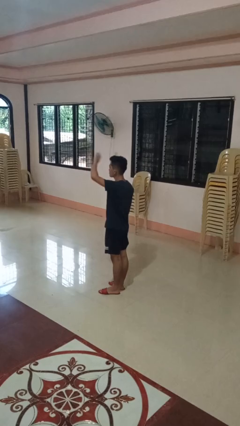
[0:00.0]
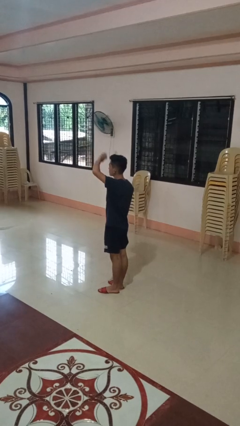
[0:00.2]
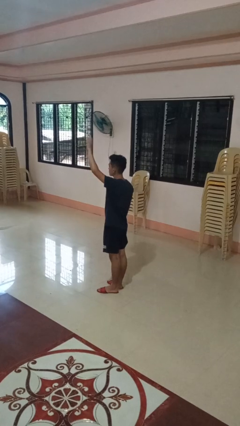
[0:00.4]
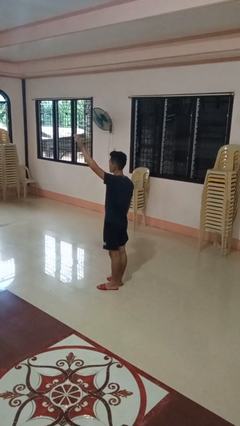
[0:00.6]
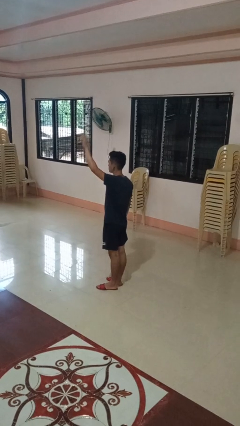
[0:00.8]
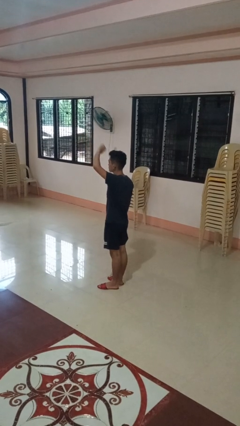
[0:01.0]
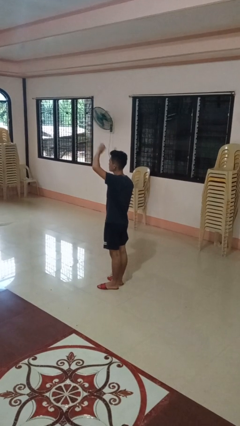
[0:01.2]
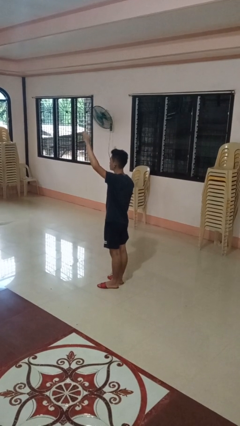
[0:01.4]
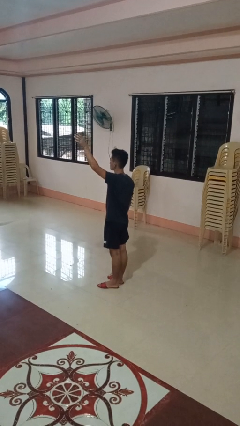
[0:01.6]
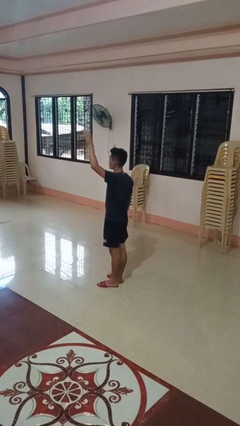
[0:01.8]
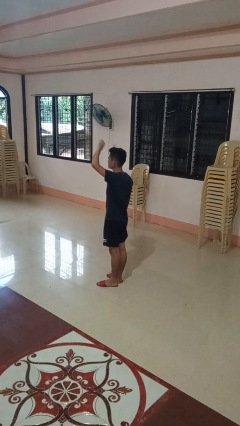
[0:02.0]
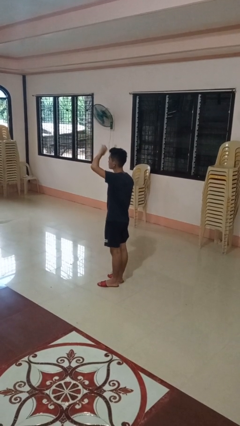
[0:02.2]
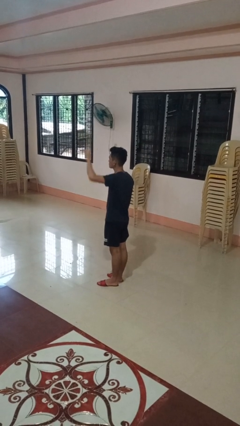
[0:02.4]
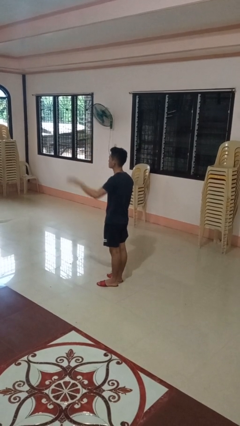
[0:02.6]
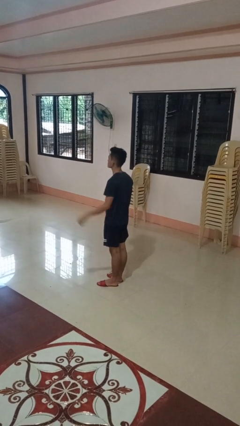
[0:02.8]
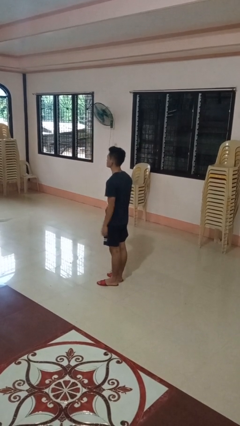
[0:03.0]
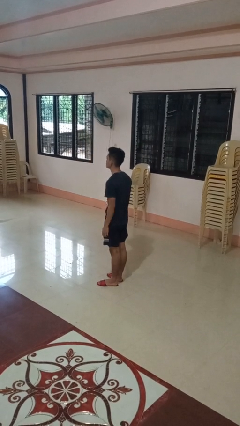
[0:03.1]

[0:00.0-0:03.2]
person waves at person

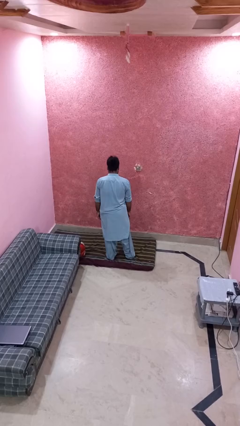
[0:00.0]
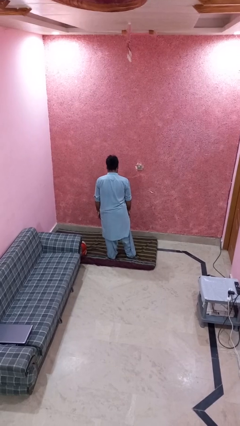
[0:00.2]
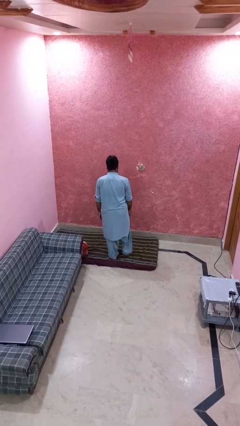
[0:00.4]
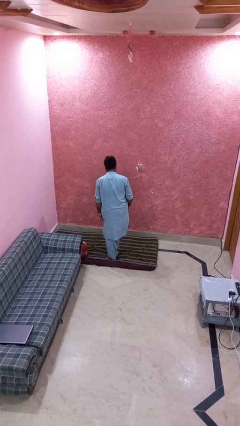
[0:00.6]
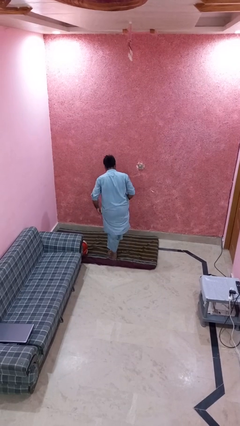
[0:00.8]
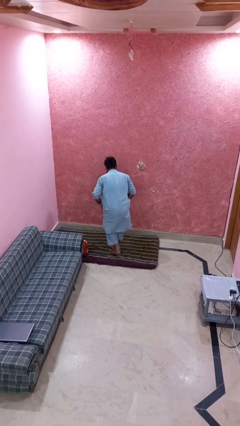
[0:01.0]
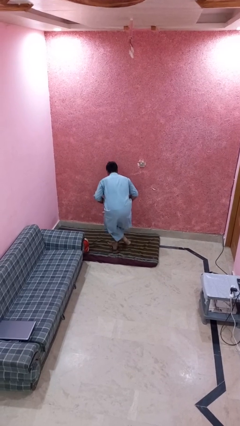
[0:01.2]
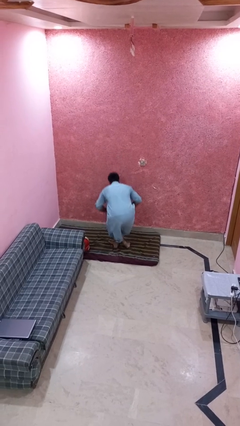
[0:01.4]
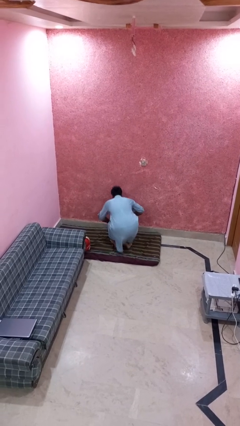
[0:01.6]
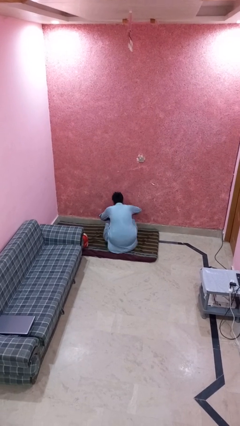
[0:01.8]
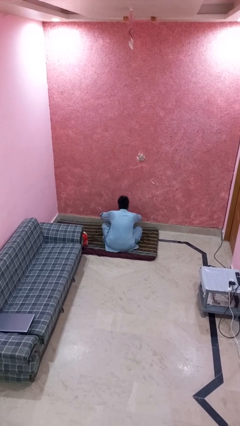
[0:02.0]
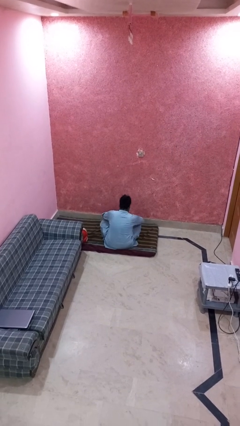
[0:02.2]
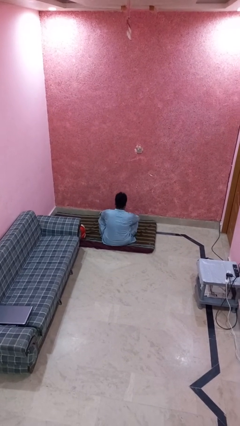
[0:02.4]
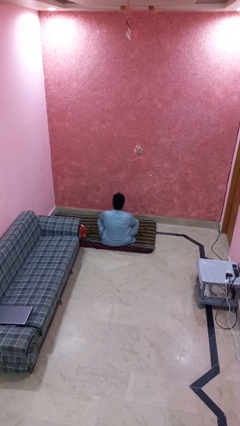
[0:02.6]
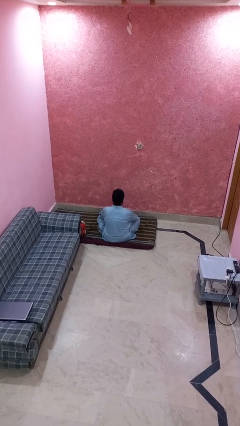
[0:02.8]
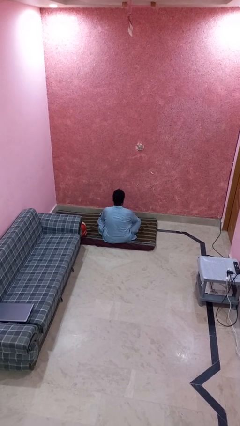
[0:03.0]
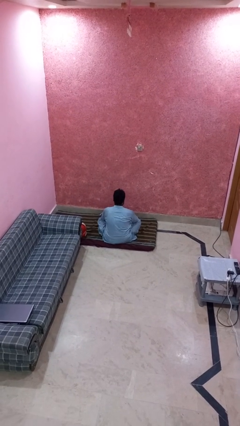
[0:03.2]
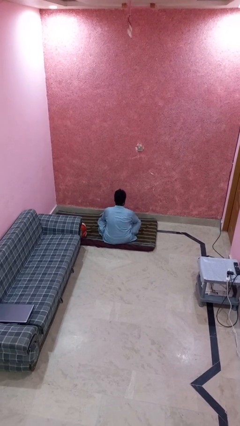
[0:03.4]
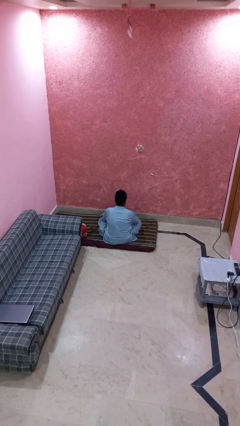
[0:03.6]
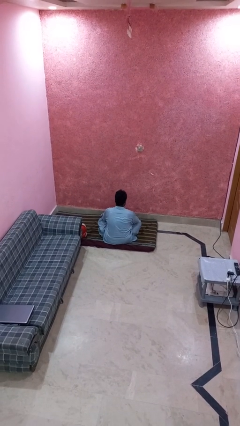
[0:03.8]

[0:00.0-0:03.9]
person sits crisscross

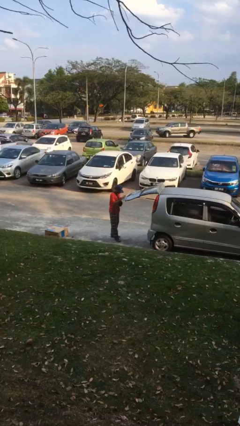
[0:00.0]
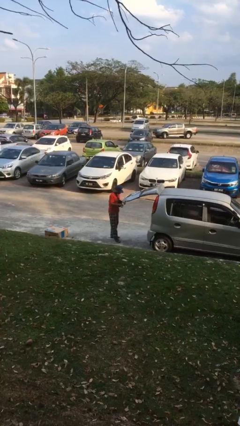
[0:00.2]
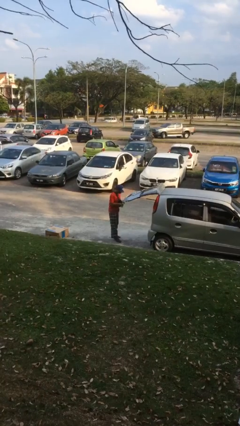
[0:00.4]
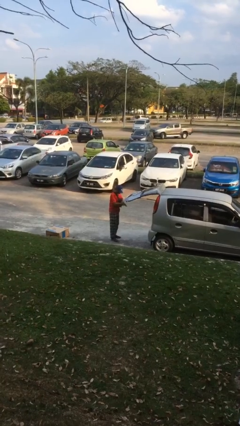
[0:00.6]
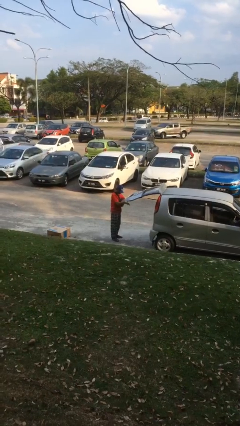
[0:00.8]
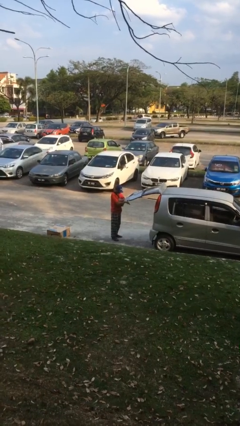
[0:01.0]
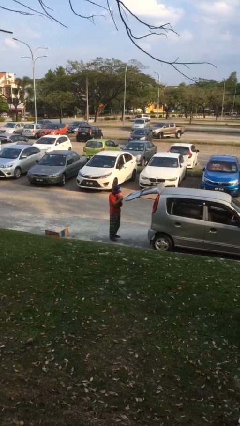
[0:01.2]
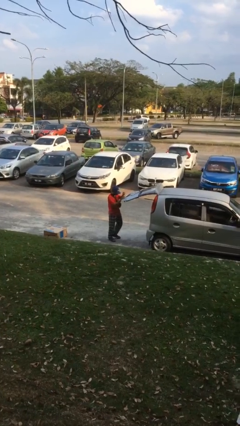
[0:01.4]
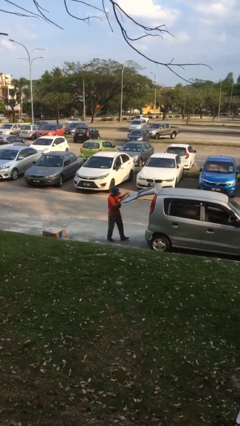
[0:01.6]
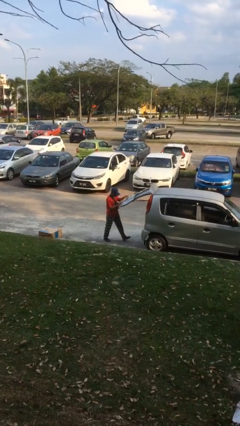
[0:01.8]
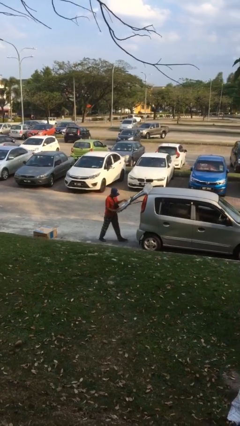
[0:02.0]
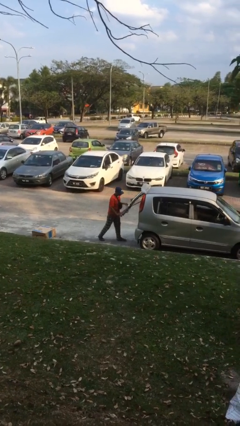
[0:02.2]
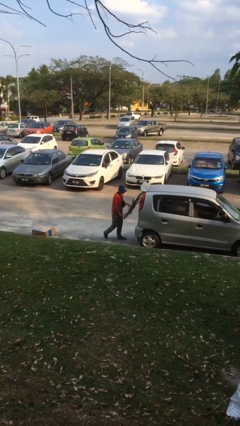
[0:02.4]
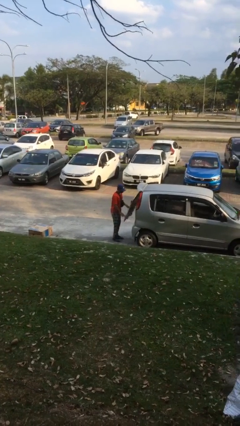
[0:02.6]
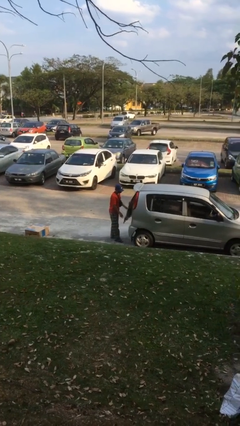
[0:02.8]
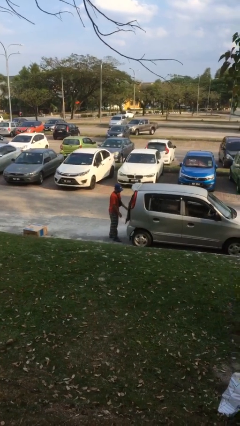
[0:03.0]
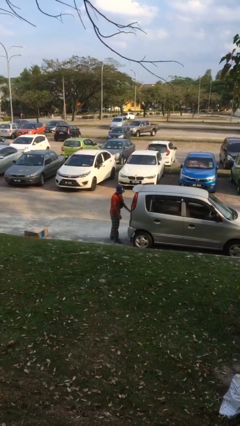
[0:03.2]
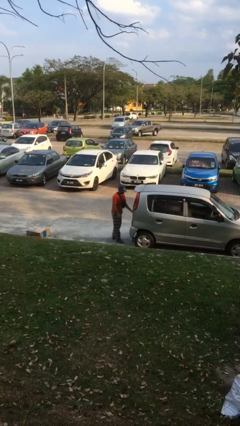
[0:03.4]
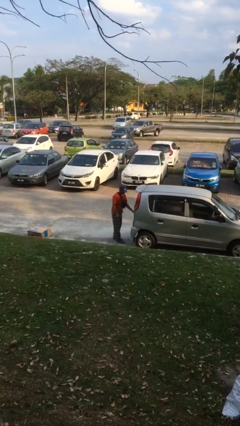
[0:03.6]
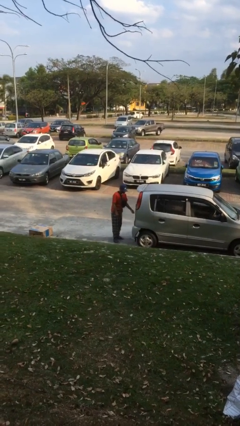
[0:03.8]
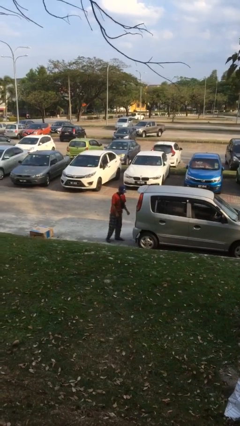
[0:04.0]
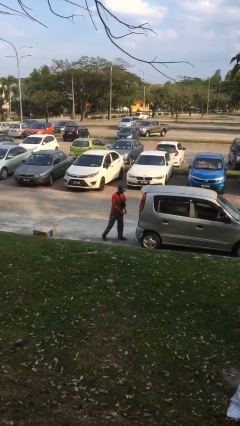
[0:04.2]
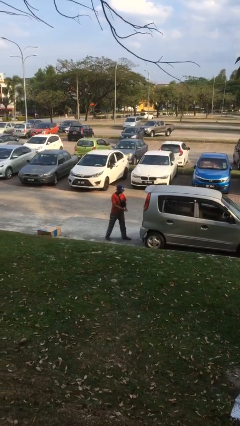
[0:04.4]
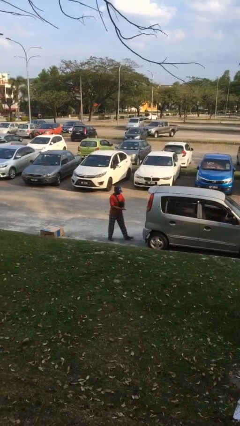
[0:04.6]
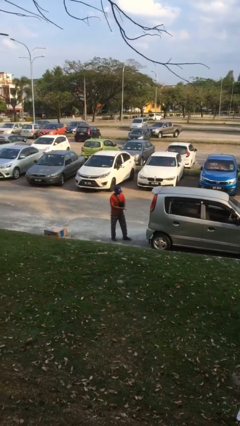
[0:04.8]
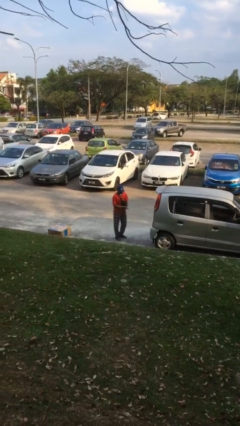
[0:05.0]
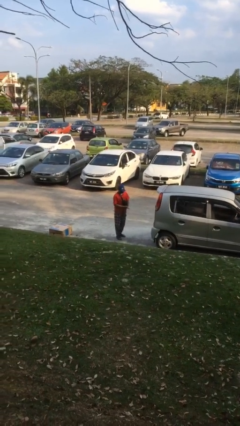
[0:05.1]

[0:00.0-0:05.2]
person closes car trunk

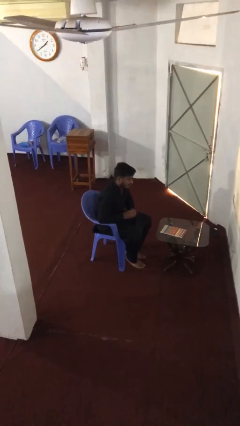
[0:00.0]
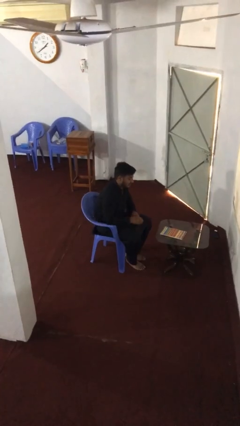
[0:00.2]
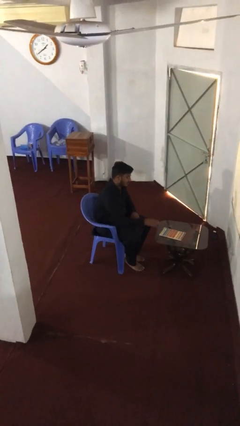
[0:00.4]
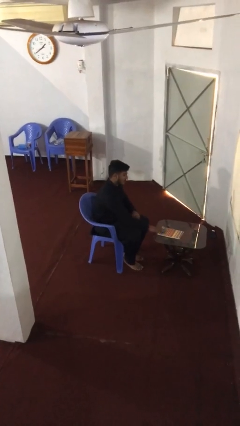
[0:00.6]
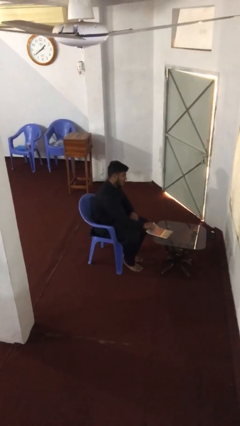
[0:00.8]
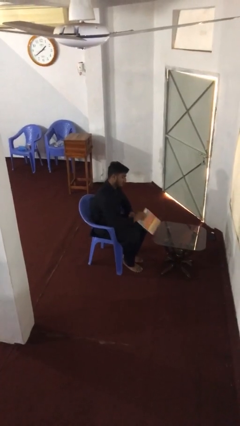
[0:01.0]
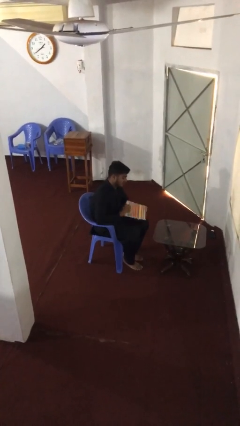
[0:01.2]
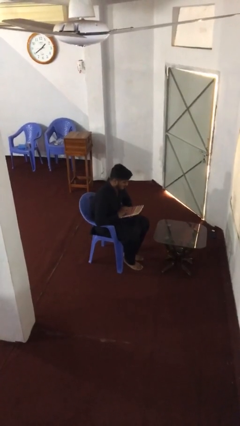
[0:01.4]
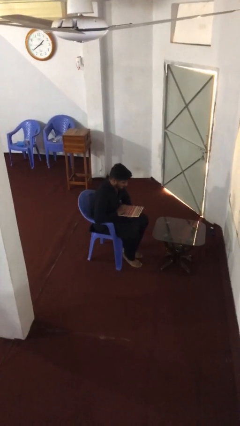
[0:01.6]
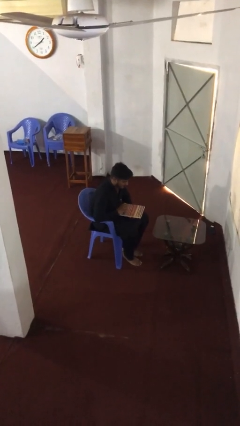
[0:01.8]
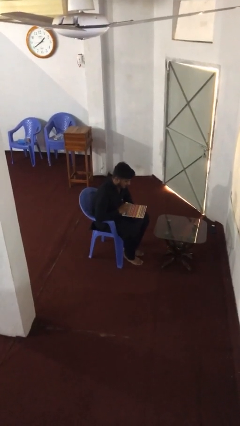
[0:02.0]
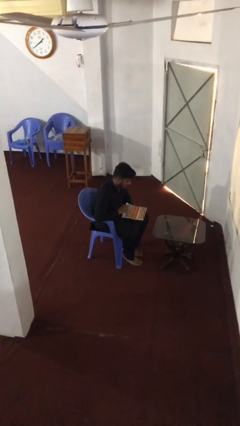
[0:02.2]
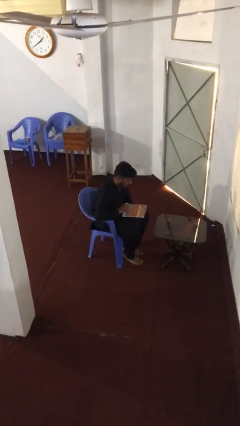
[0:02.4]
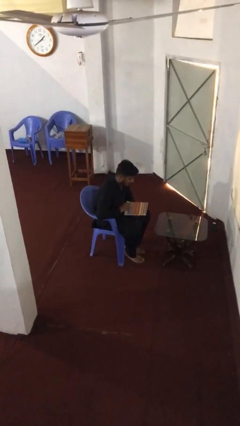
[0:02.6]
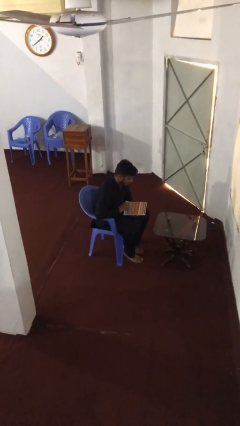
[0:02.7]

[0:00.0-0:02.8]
person picks up object from table

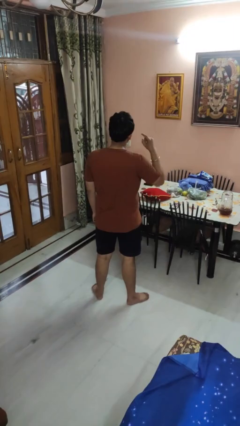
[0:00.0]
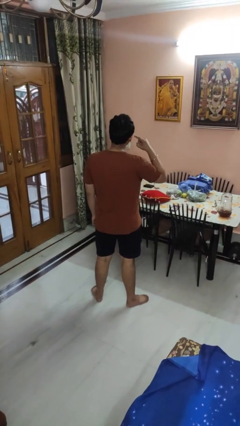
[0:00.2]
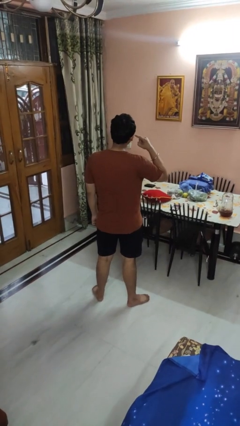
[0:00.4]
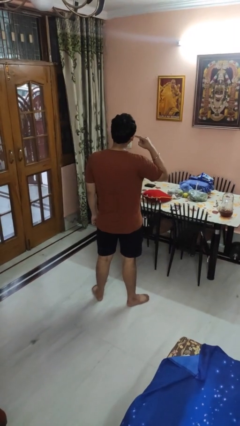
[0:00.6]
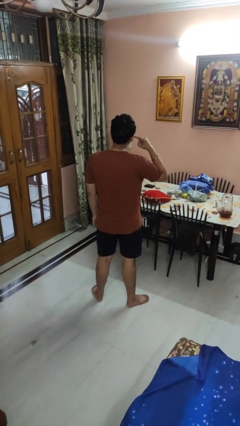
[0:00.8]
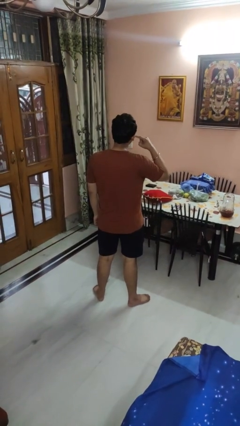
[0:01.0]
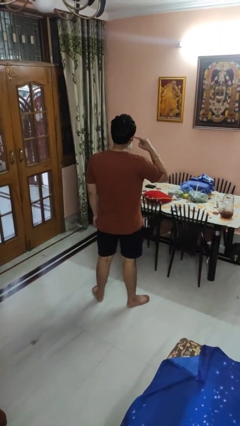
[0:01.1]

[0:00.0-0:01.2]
person gestures listen closely

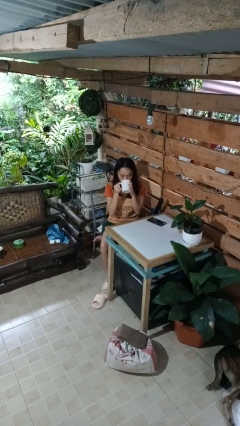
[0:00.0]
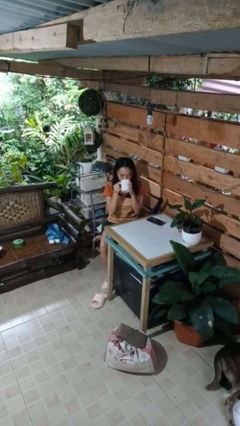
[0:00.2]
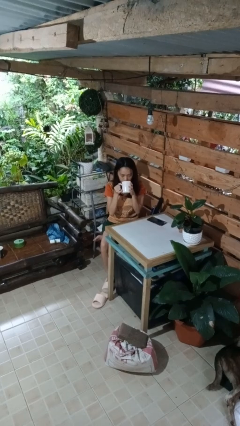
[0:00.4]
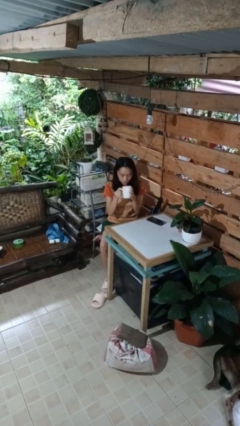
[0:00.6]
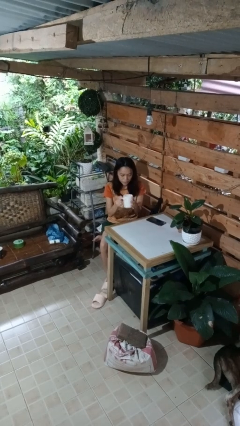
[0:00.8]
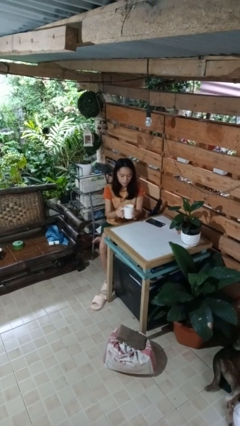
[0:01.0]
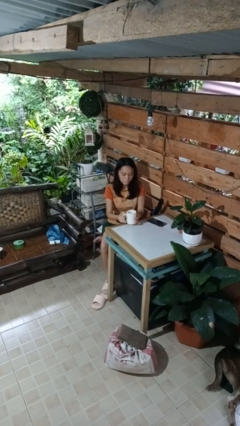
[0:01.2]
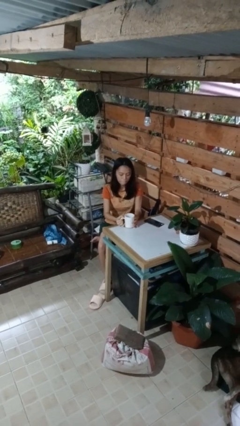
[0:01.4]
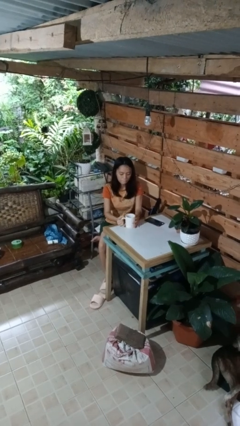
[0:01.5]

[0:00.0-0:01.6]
person puts down object on table
